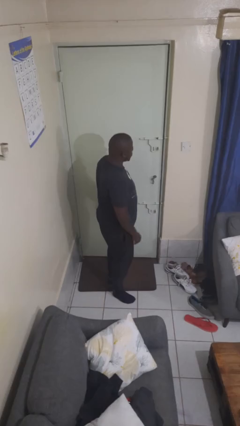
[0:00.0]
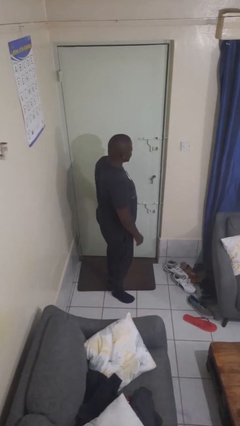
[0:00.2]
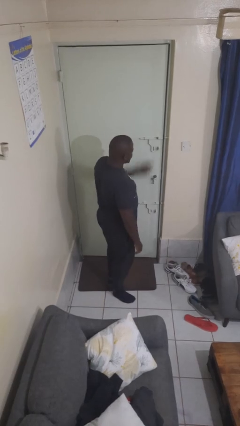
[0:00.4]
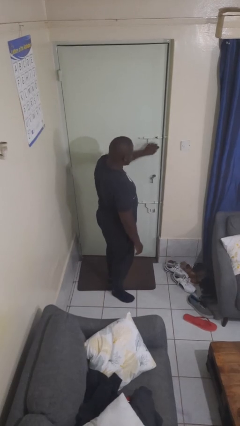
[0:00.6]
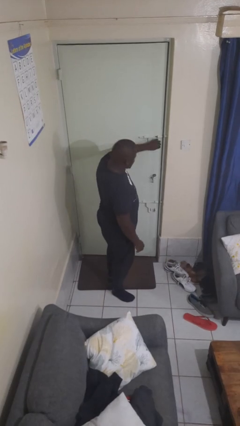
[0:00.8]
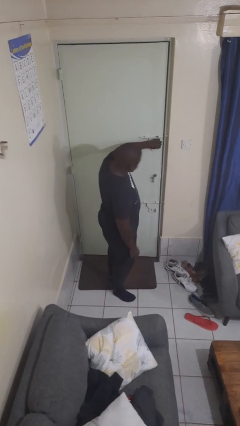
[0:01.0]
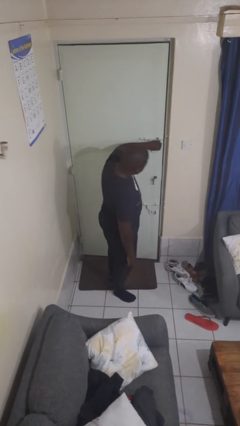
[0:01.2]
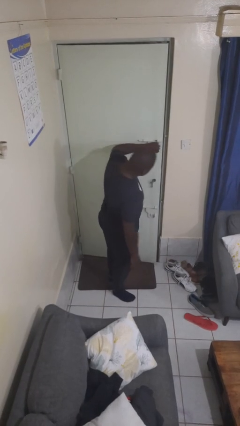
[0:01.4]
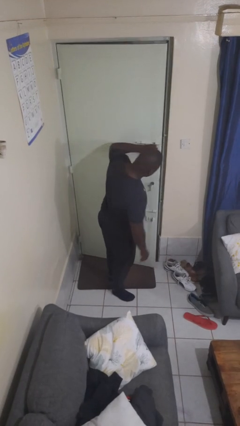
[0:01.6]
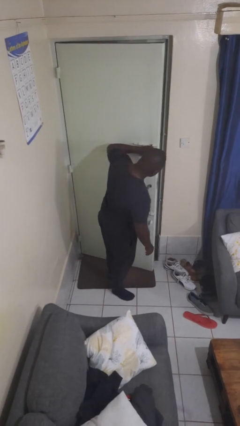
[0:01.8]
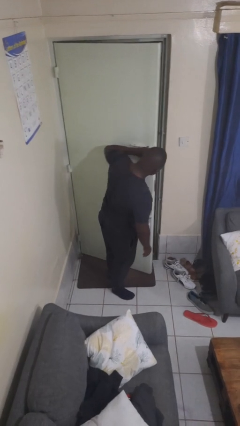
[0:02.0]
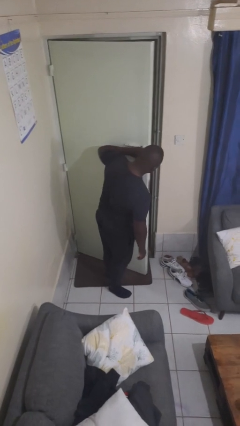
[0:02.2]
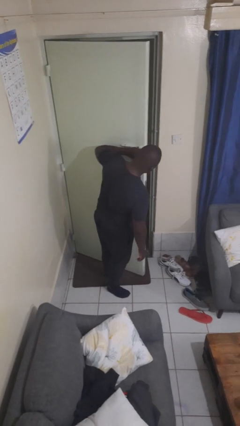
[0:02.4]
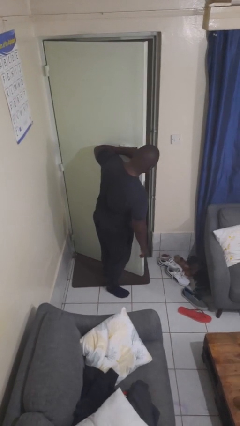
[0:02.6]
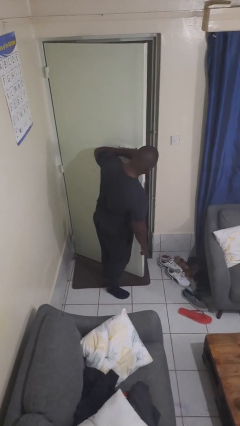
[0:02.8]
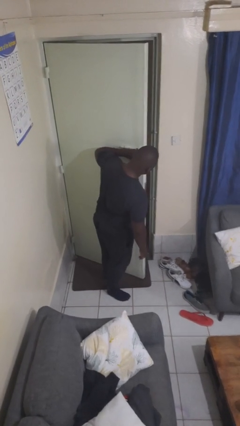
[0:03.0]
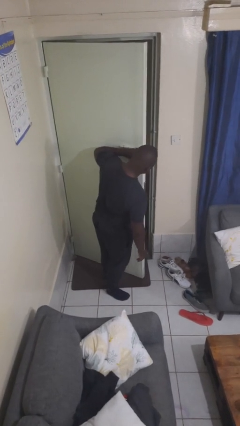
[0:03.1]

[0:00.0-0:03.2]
person opens facility door

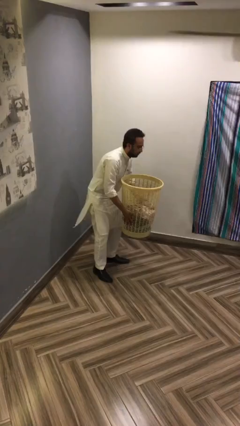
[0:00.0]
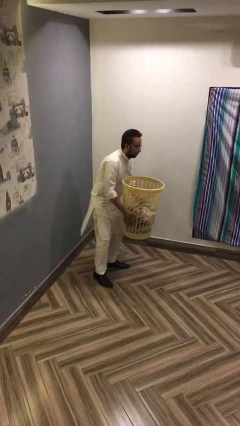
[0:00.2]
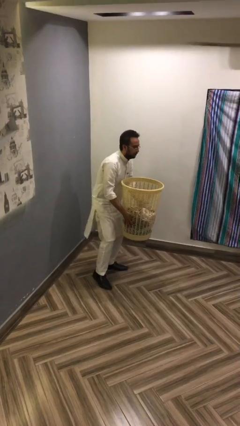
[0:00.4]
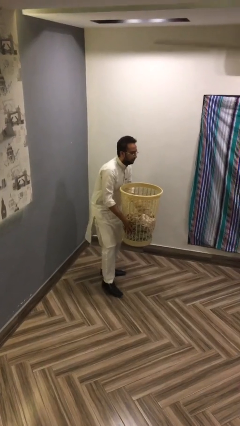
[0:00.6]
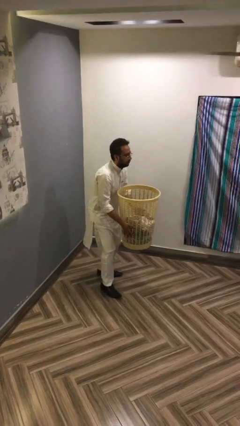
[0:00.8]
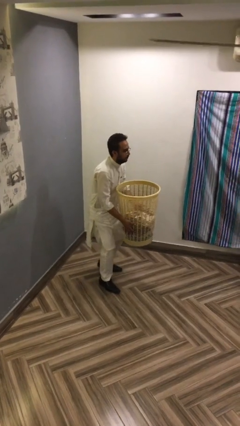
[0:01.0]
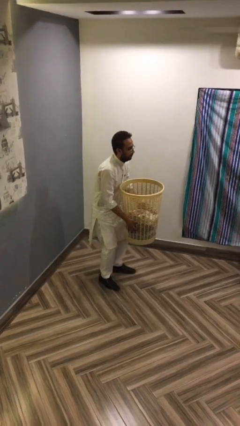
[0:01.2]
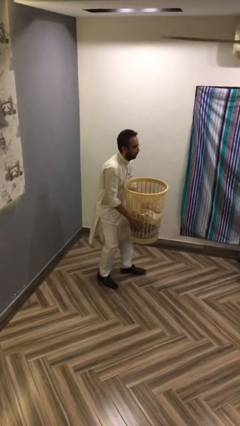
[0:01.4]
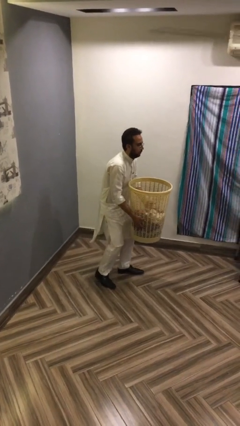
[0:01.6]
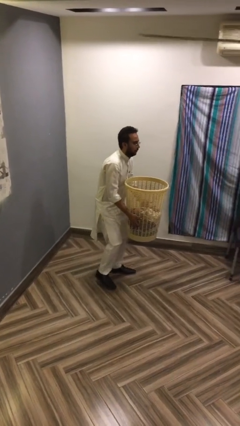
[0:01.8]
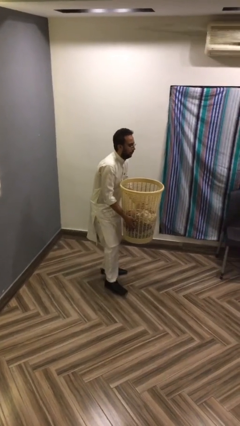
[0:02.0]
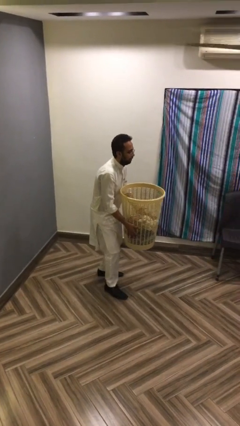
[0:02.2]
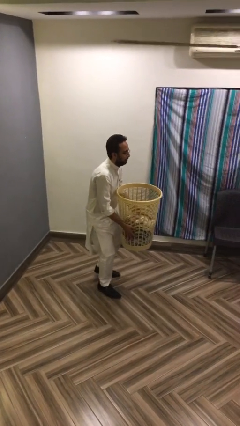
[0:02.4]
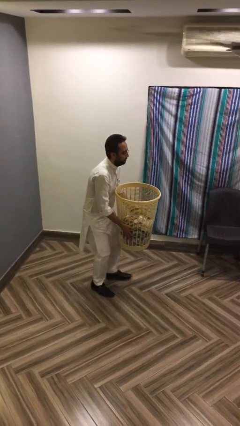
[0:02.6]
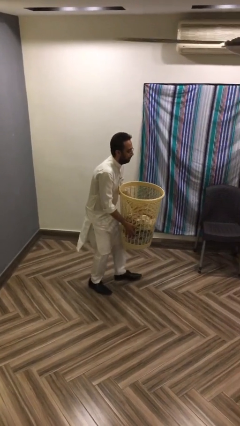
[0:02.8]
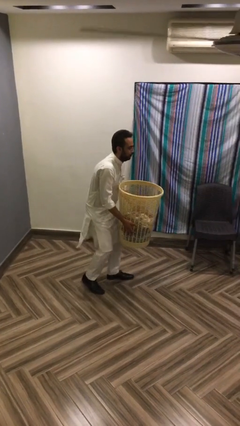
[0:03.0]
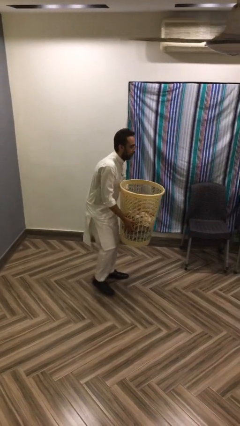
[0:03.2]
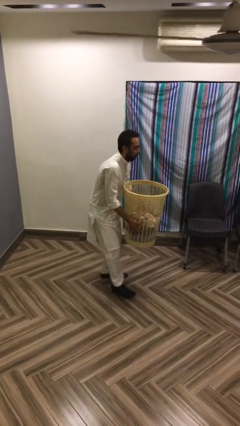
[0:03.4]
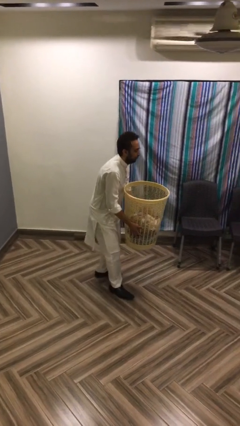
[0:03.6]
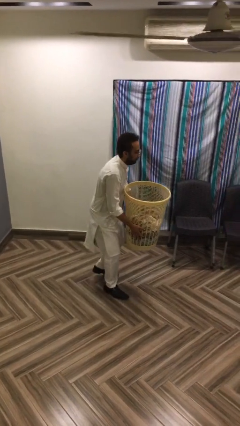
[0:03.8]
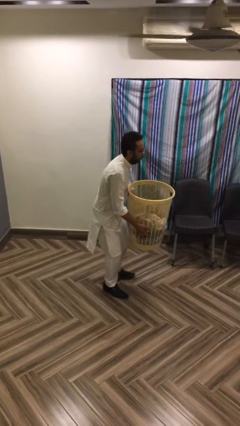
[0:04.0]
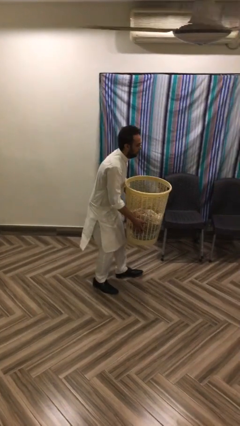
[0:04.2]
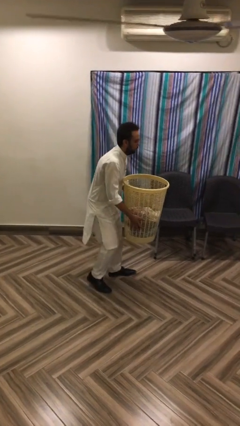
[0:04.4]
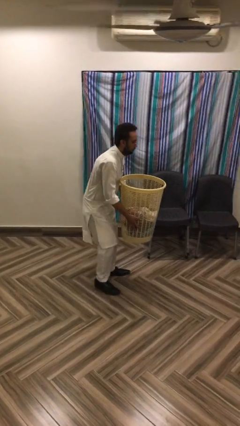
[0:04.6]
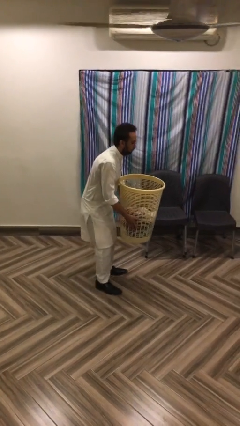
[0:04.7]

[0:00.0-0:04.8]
person carries heavy object

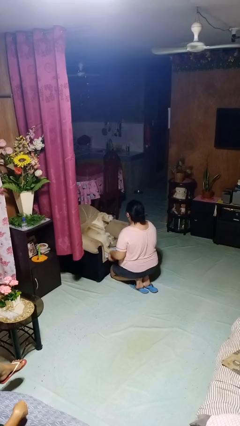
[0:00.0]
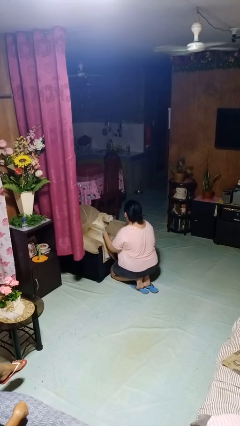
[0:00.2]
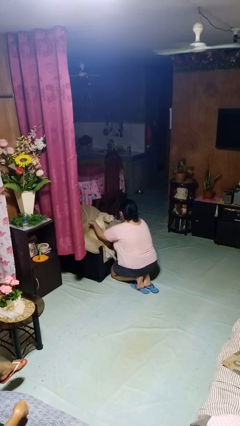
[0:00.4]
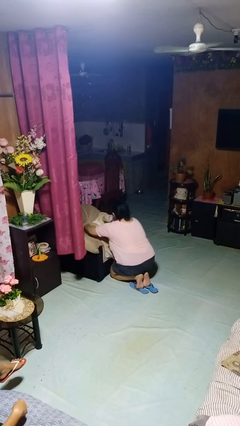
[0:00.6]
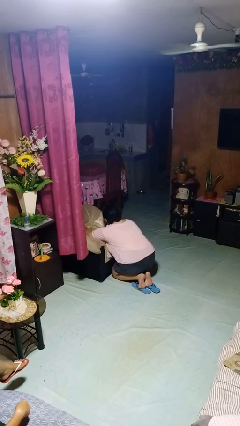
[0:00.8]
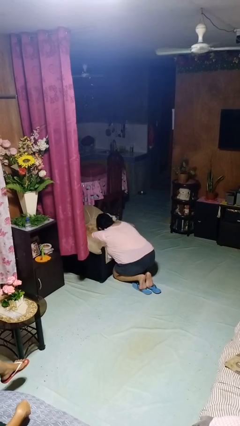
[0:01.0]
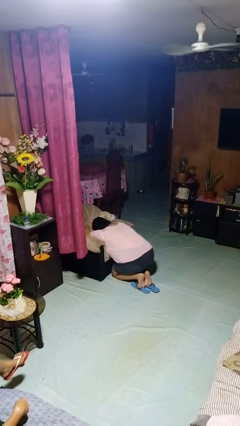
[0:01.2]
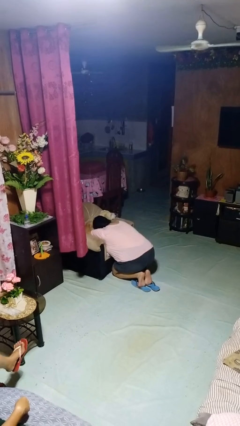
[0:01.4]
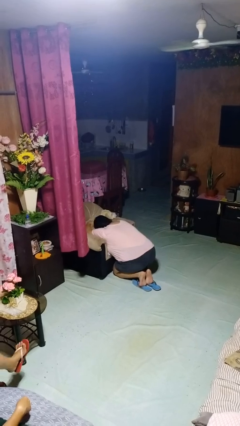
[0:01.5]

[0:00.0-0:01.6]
person hugs dog

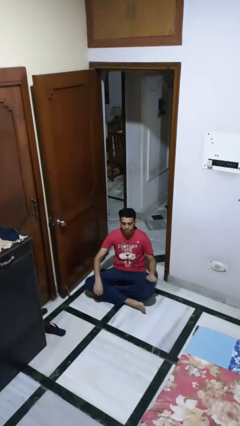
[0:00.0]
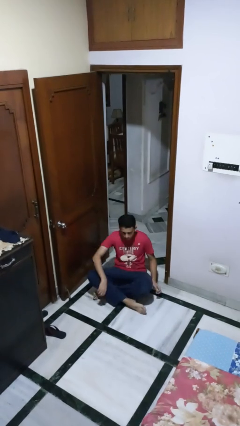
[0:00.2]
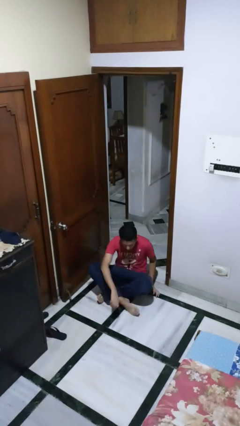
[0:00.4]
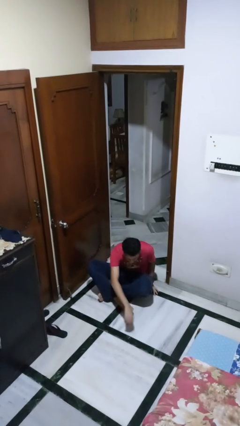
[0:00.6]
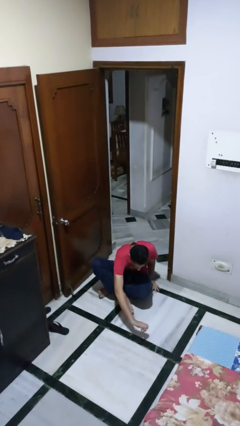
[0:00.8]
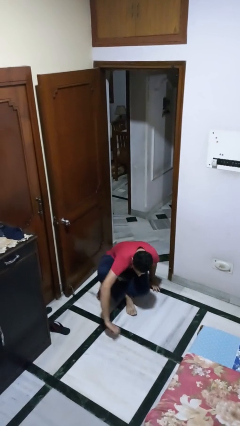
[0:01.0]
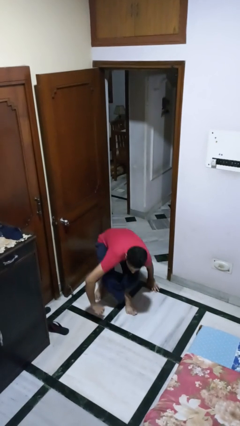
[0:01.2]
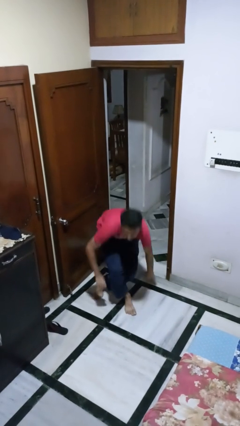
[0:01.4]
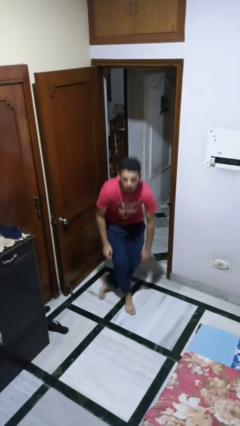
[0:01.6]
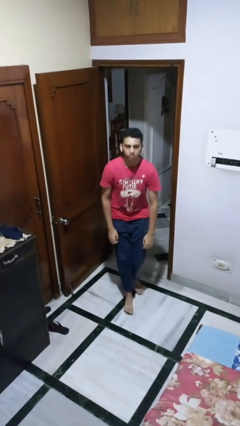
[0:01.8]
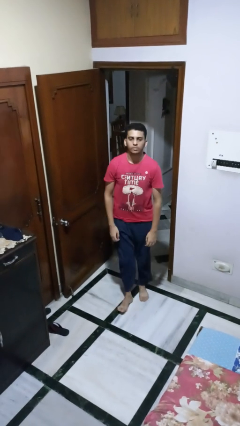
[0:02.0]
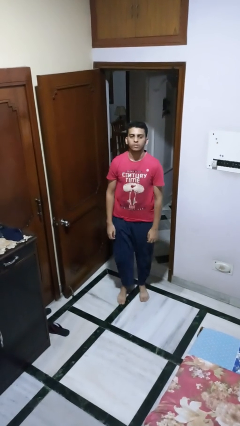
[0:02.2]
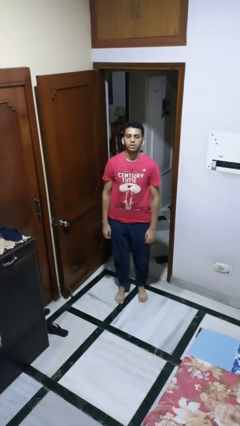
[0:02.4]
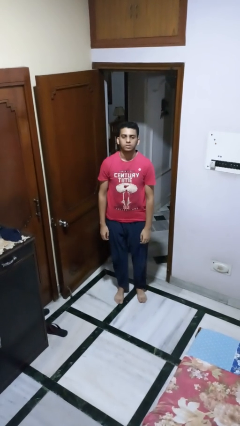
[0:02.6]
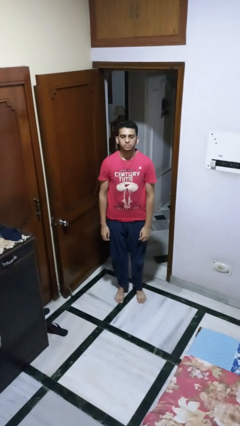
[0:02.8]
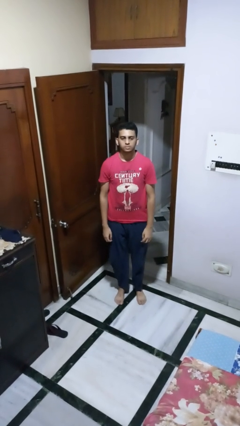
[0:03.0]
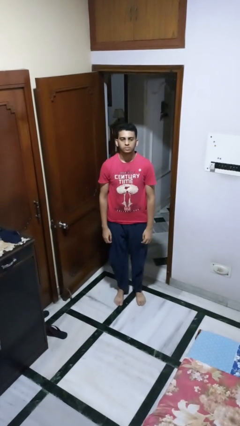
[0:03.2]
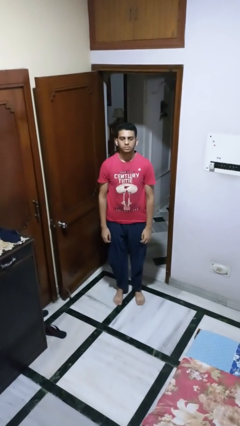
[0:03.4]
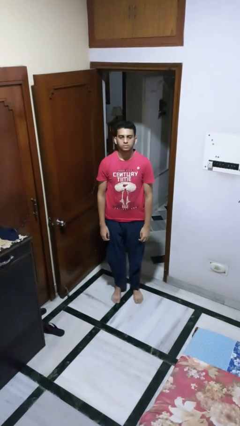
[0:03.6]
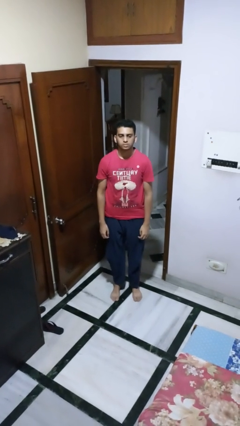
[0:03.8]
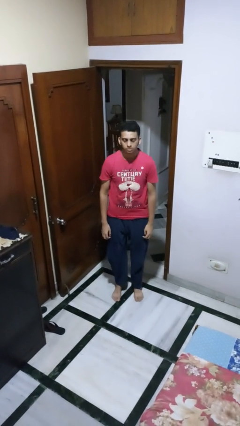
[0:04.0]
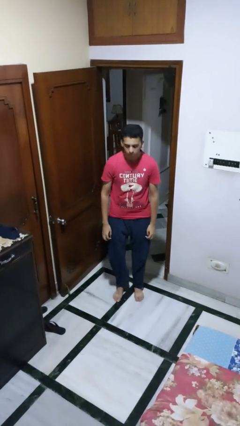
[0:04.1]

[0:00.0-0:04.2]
person stands up from floor

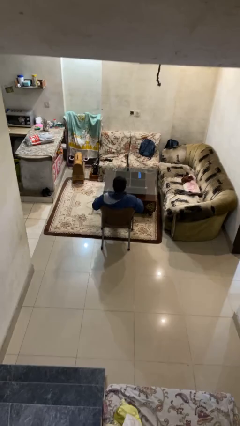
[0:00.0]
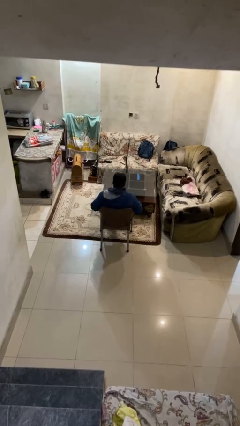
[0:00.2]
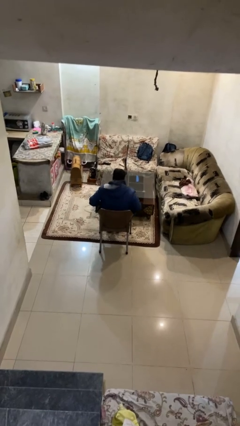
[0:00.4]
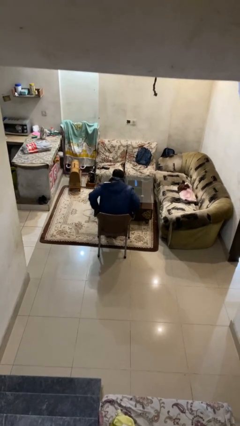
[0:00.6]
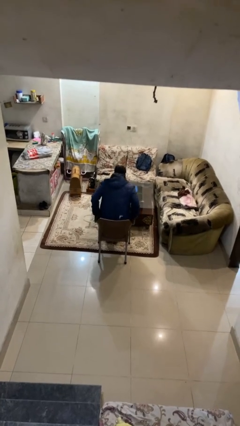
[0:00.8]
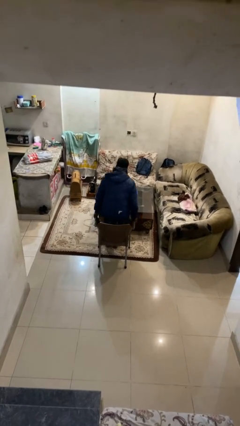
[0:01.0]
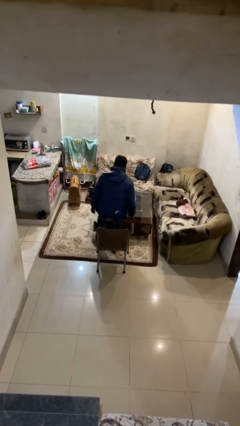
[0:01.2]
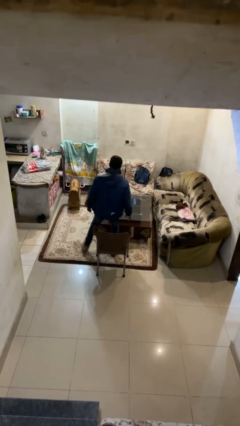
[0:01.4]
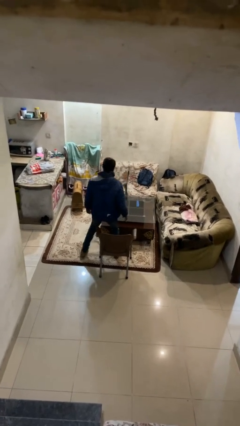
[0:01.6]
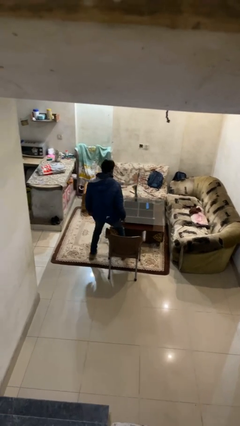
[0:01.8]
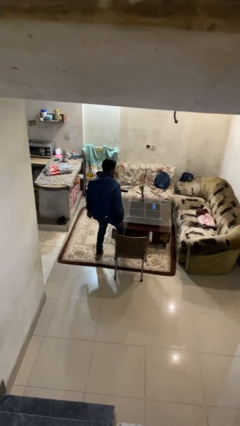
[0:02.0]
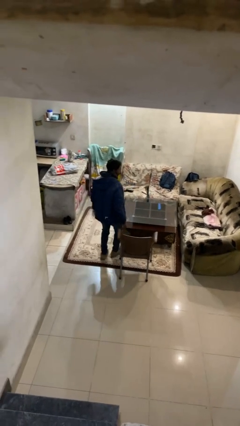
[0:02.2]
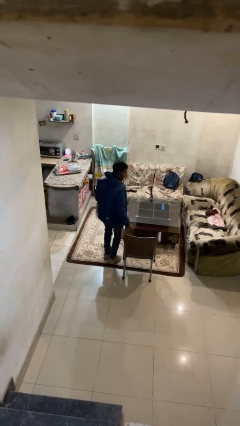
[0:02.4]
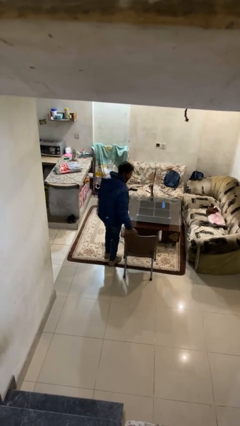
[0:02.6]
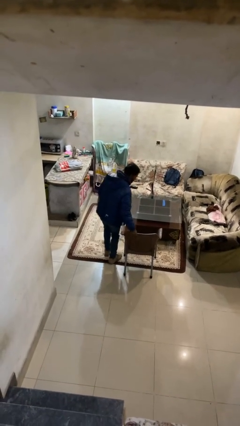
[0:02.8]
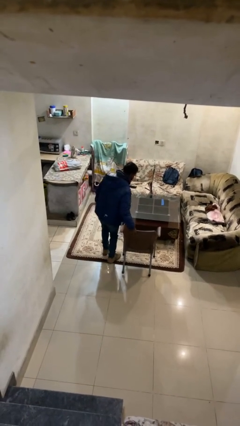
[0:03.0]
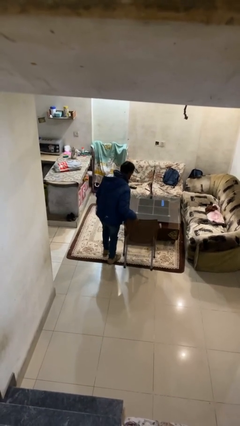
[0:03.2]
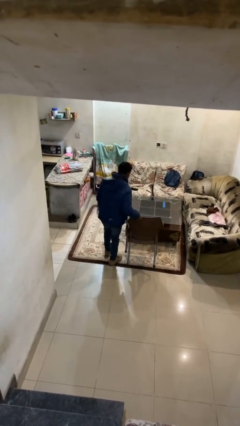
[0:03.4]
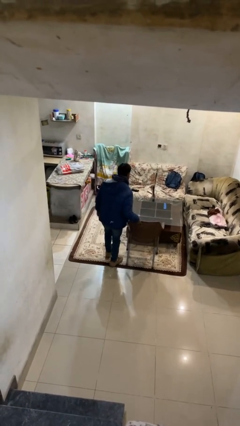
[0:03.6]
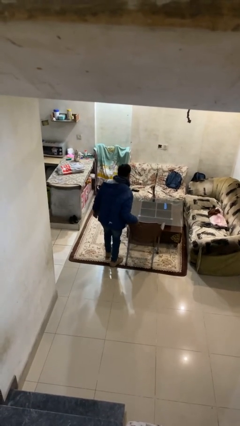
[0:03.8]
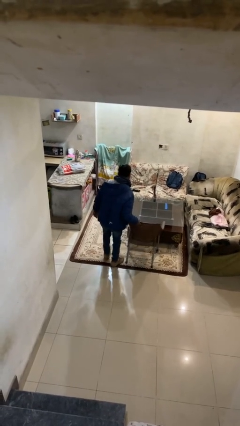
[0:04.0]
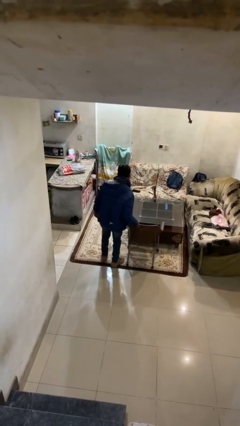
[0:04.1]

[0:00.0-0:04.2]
person stands up
